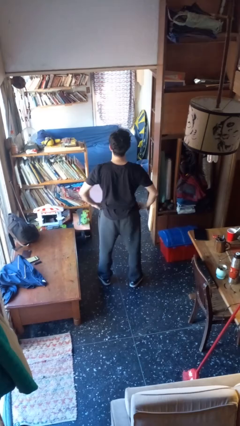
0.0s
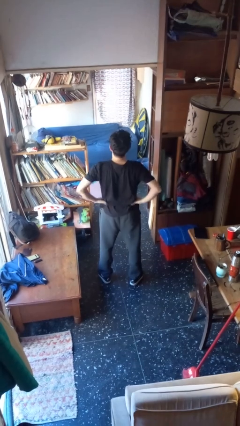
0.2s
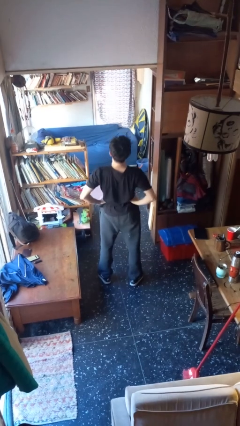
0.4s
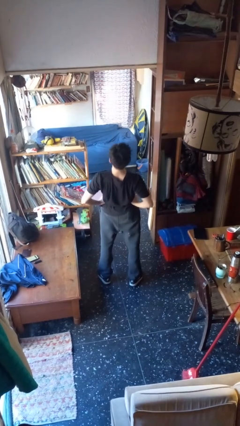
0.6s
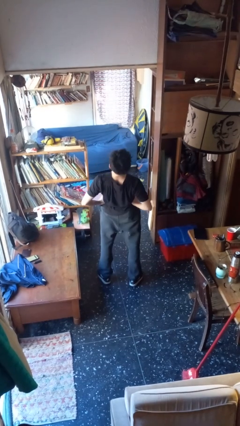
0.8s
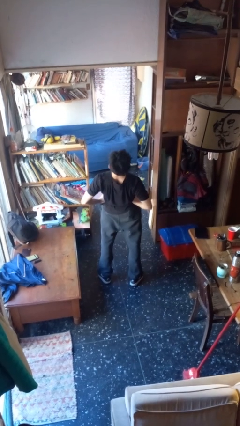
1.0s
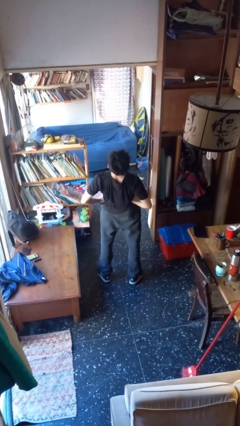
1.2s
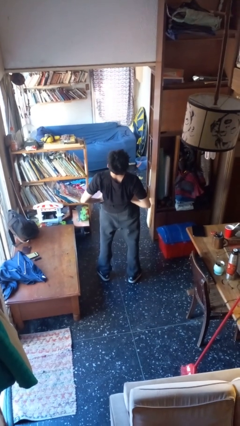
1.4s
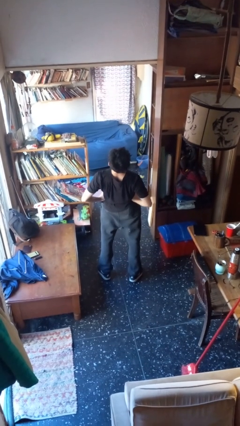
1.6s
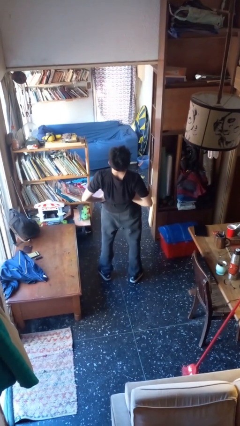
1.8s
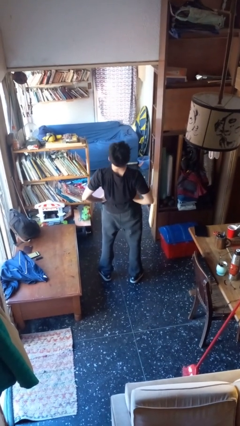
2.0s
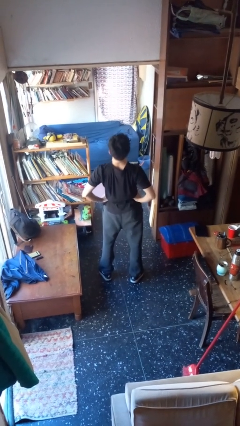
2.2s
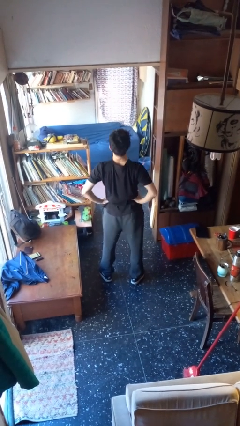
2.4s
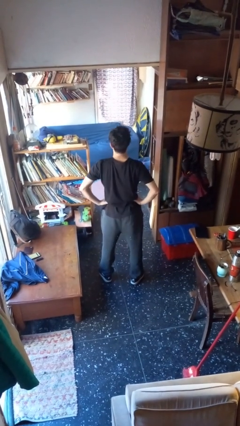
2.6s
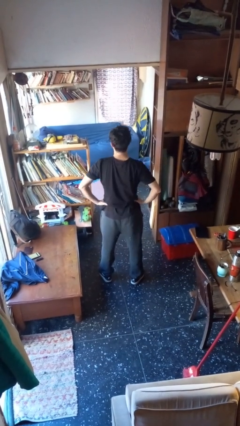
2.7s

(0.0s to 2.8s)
person stretches back

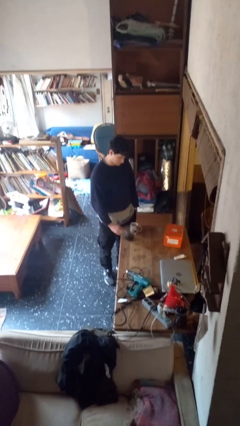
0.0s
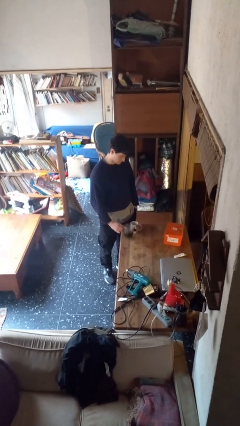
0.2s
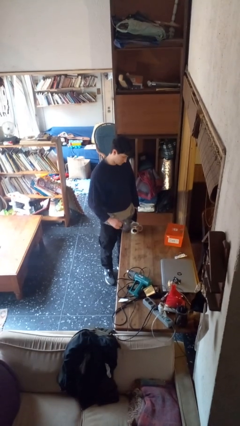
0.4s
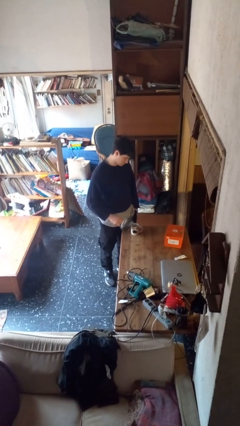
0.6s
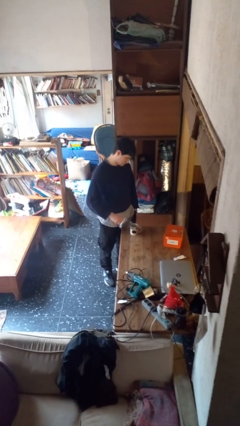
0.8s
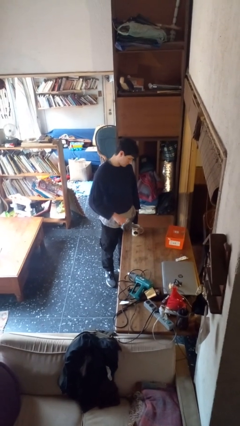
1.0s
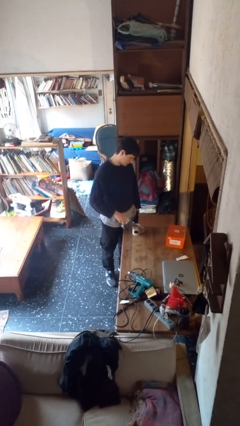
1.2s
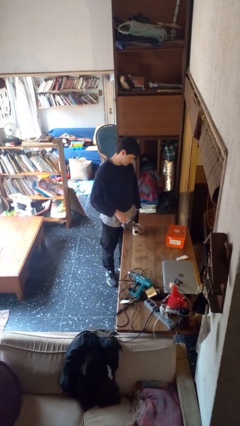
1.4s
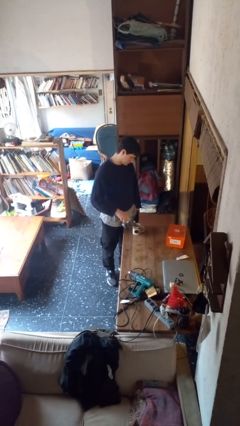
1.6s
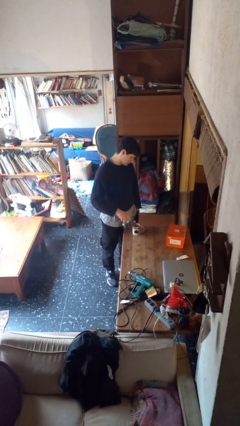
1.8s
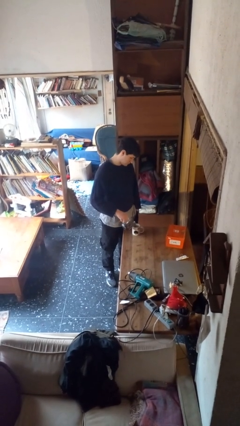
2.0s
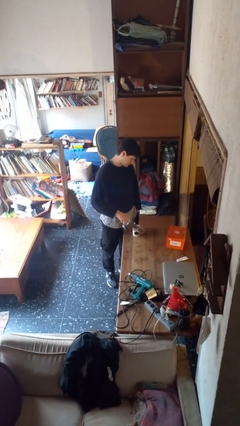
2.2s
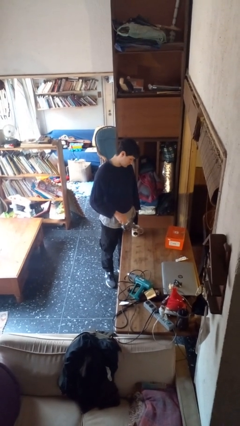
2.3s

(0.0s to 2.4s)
person pours coffee into mug

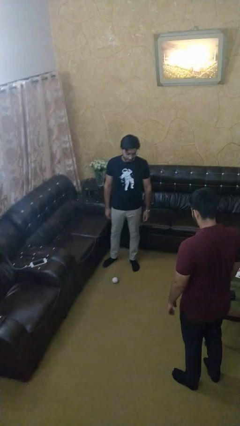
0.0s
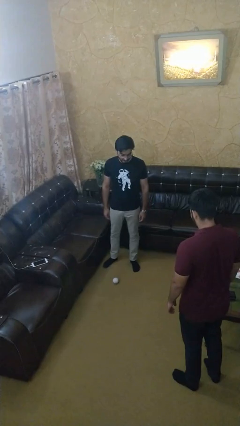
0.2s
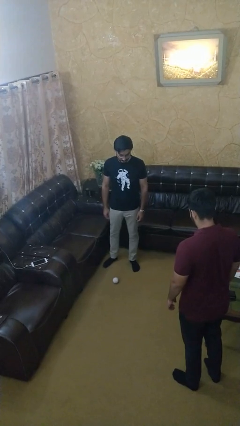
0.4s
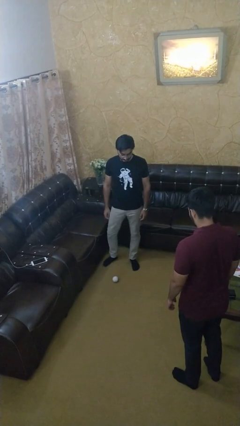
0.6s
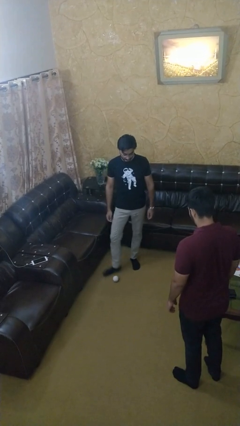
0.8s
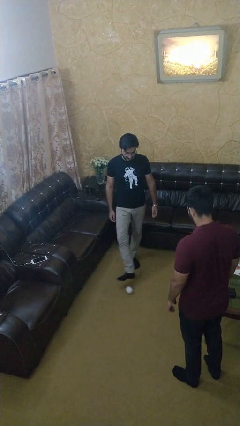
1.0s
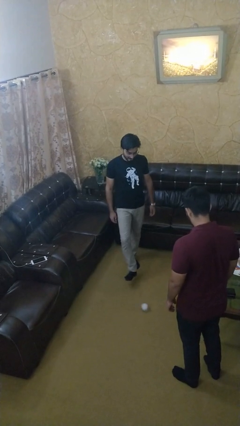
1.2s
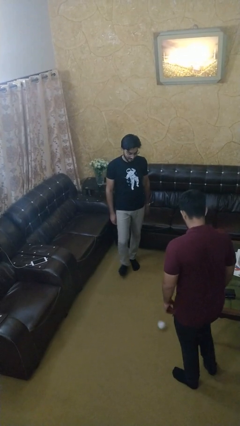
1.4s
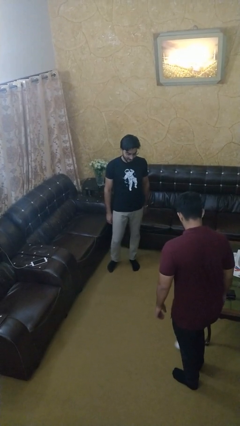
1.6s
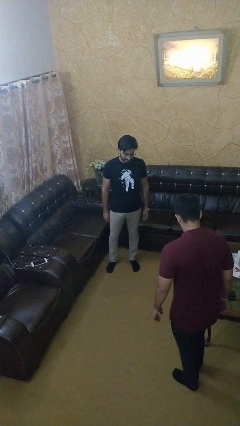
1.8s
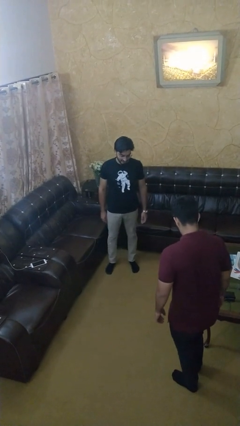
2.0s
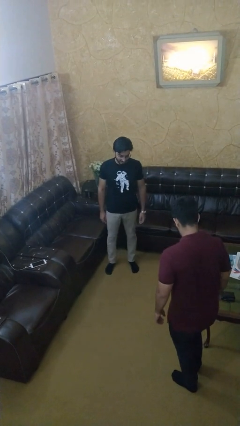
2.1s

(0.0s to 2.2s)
person kicks object to person

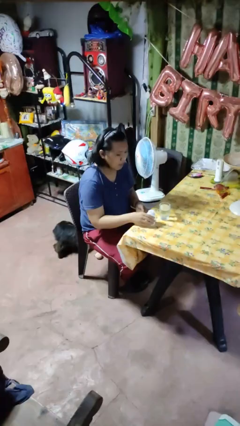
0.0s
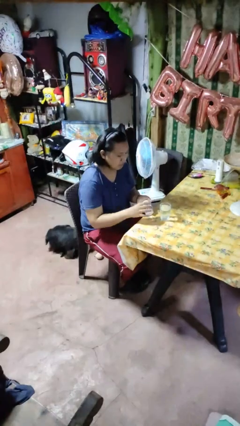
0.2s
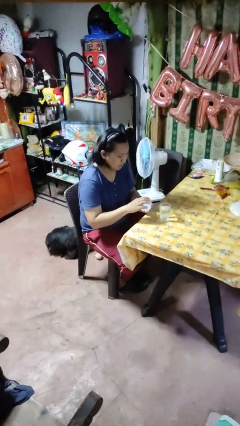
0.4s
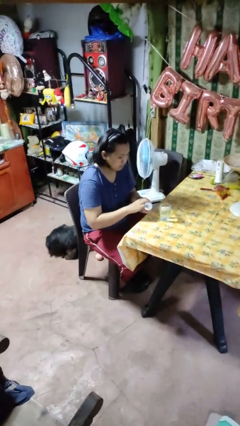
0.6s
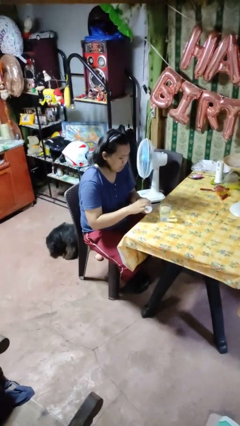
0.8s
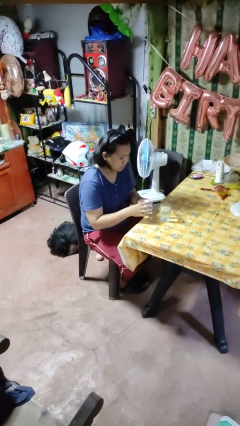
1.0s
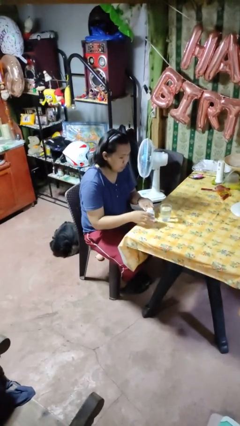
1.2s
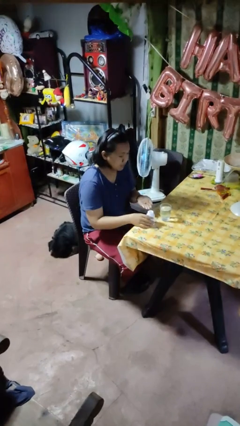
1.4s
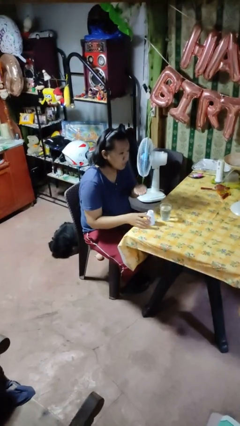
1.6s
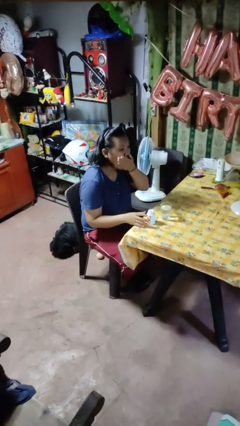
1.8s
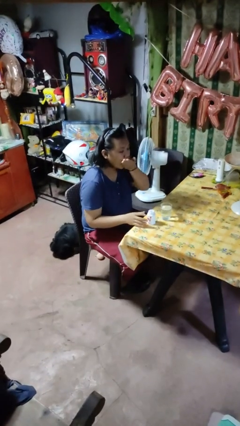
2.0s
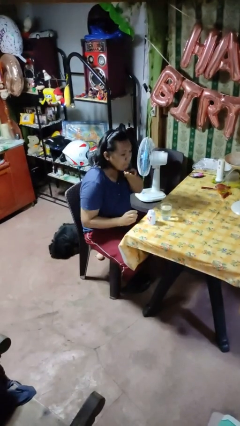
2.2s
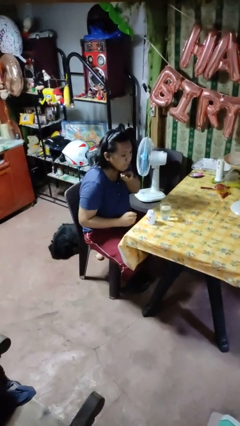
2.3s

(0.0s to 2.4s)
person takes medicine pills

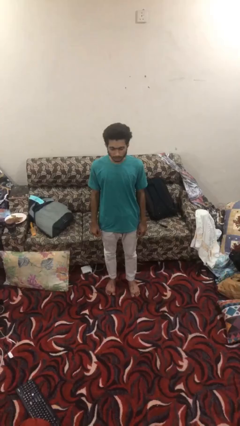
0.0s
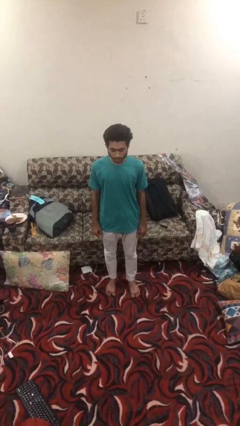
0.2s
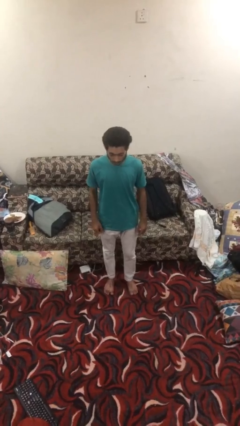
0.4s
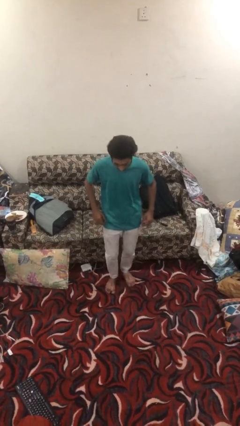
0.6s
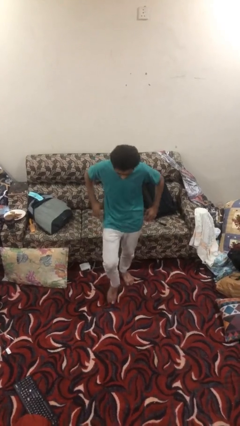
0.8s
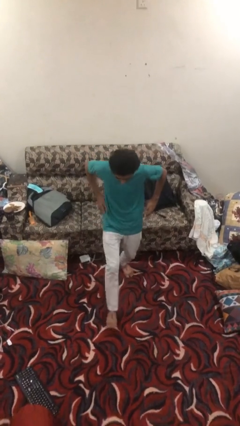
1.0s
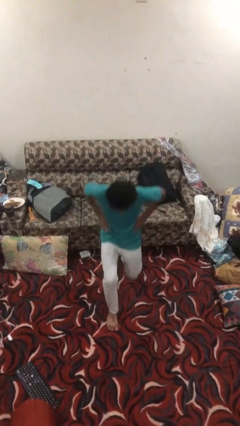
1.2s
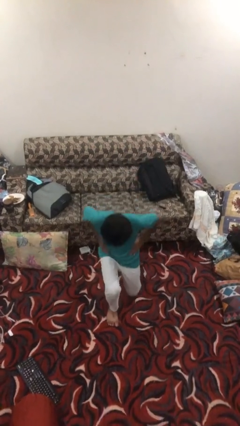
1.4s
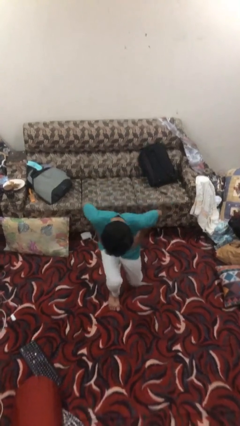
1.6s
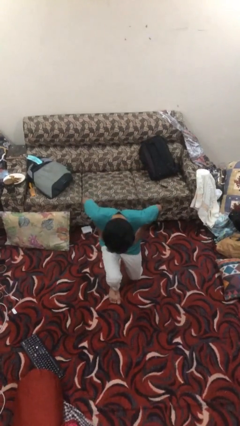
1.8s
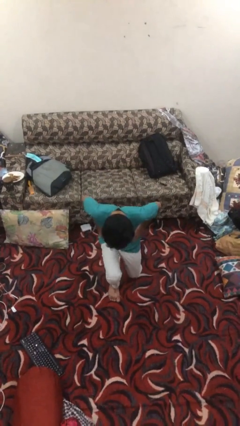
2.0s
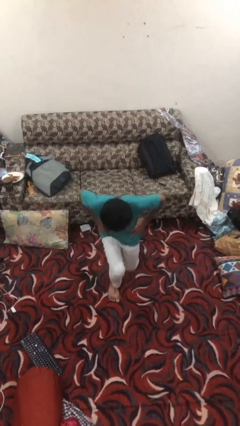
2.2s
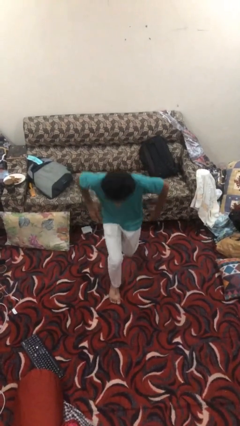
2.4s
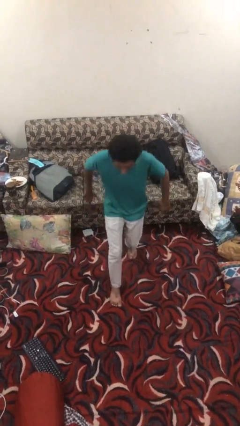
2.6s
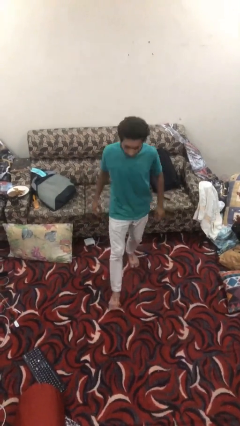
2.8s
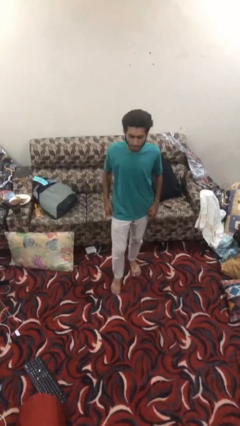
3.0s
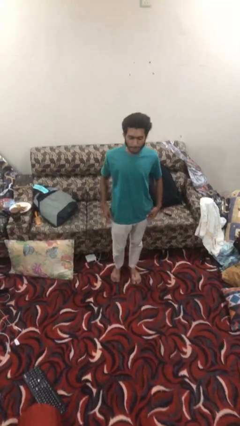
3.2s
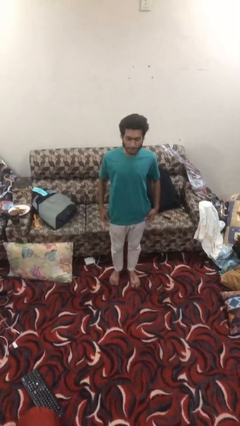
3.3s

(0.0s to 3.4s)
person exercises with lunges

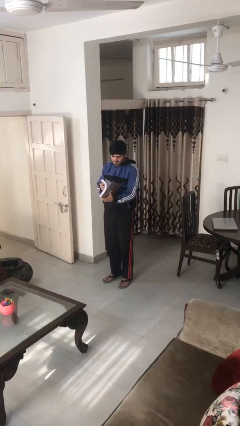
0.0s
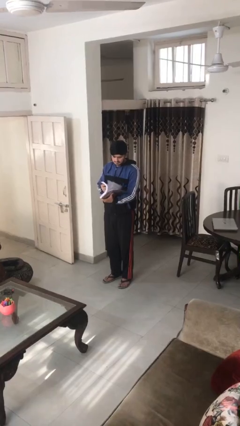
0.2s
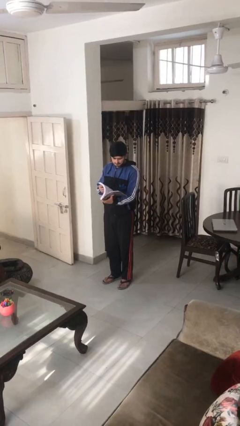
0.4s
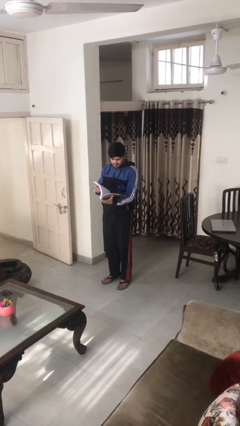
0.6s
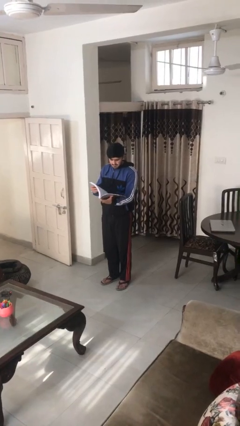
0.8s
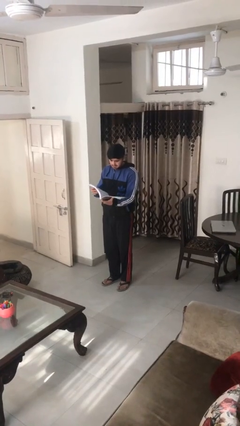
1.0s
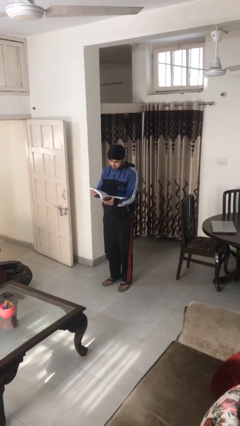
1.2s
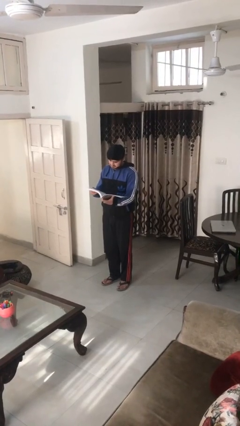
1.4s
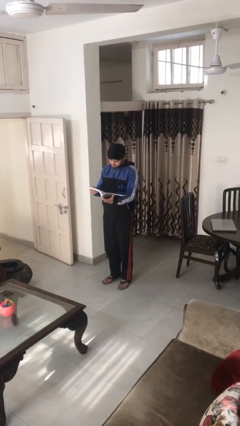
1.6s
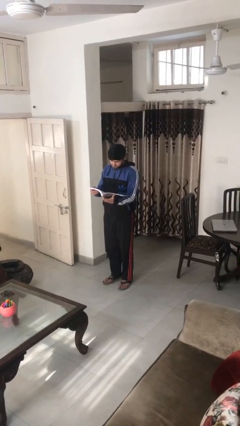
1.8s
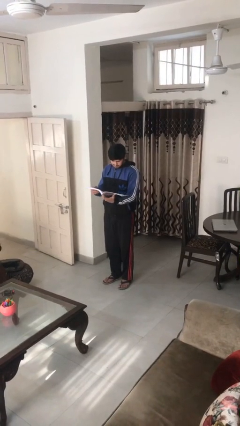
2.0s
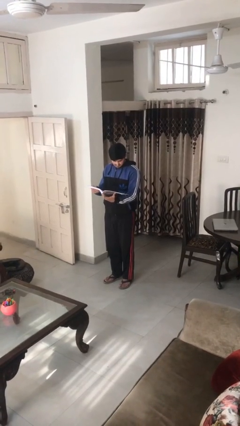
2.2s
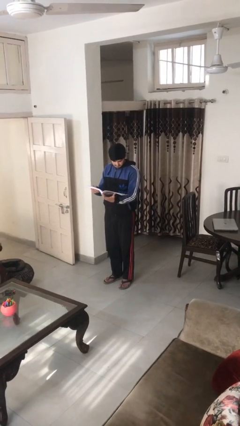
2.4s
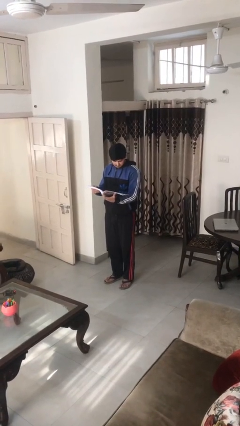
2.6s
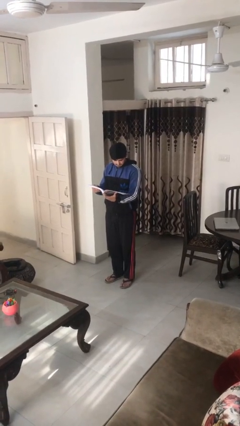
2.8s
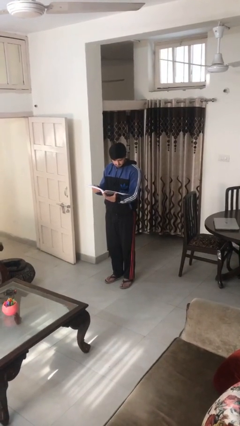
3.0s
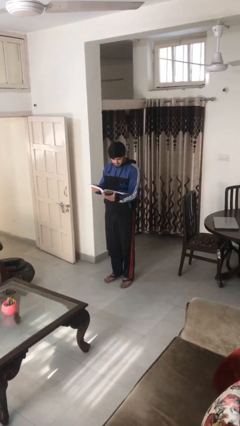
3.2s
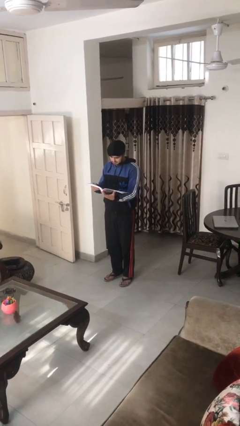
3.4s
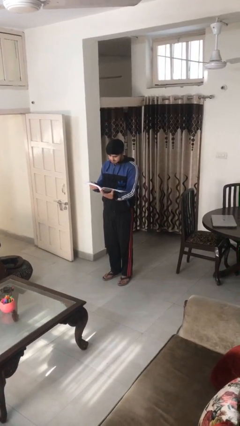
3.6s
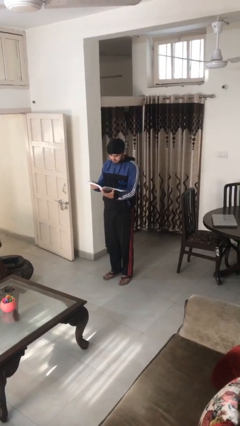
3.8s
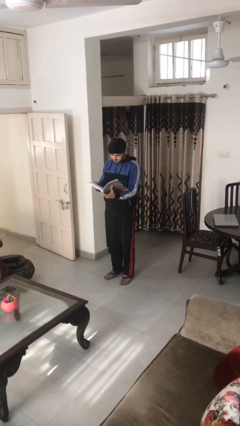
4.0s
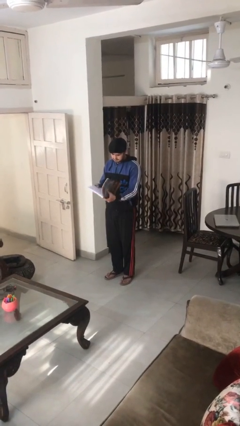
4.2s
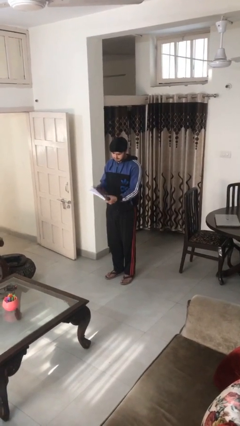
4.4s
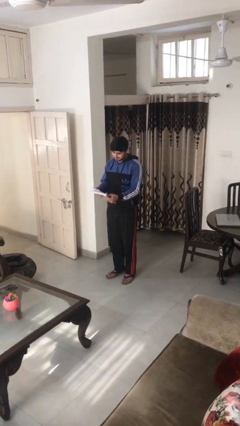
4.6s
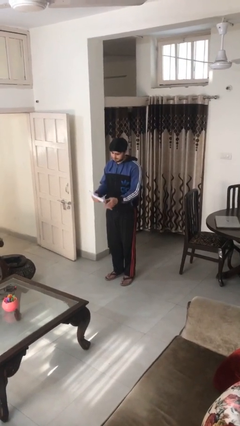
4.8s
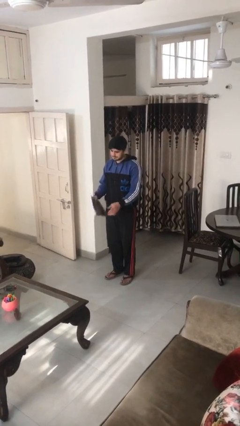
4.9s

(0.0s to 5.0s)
person reads document
